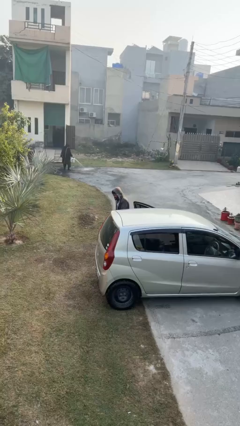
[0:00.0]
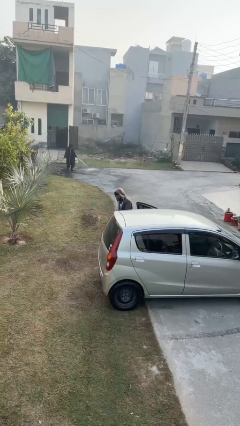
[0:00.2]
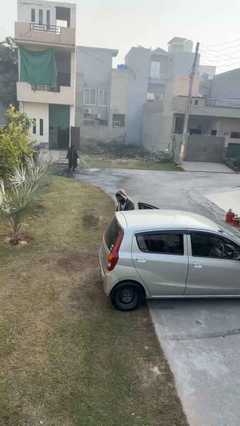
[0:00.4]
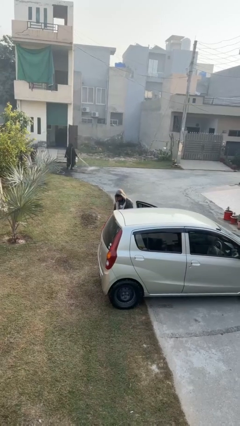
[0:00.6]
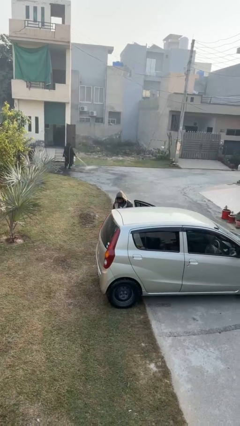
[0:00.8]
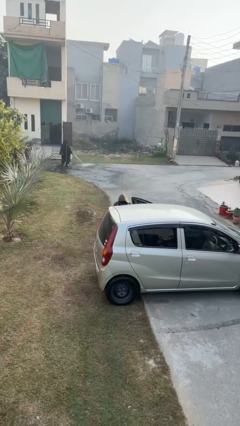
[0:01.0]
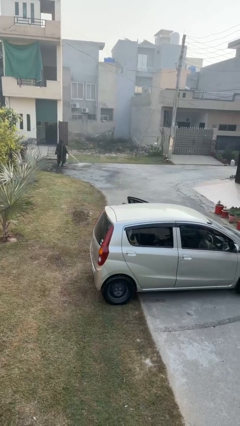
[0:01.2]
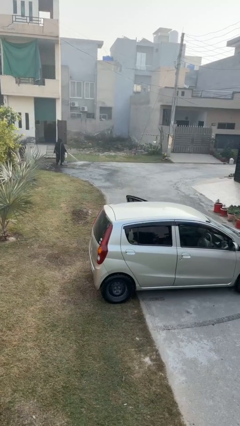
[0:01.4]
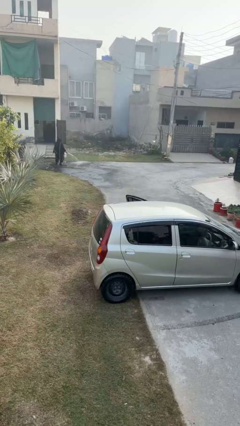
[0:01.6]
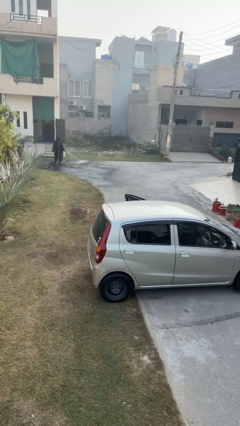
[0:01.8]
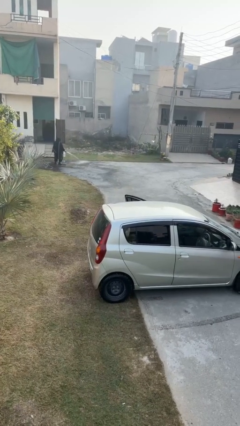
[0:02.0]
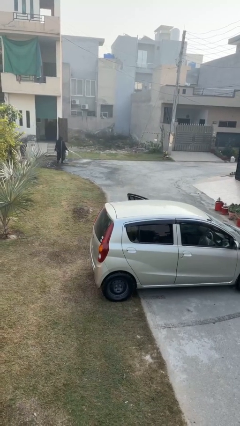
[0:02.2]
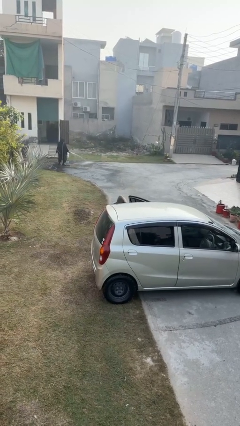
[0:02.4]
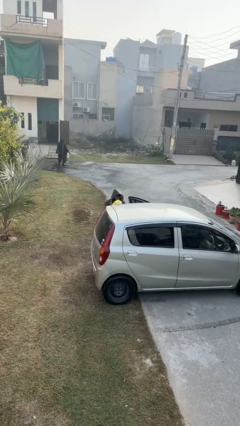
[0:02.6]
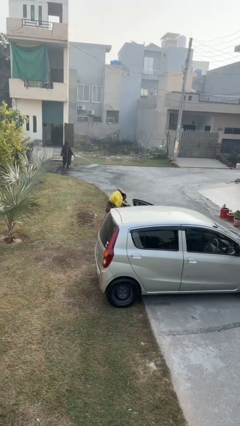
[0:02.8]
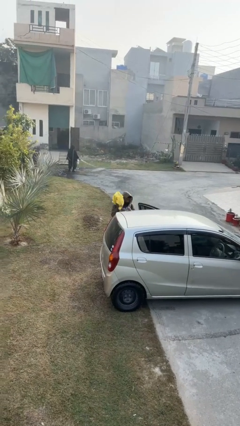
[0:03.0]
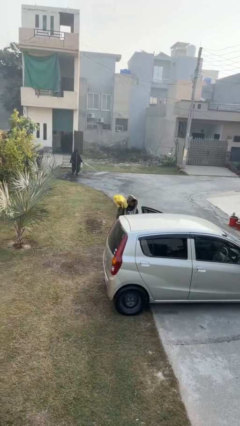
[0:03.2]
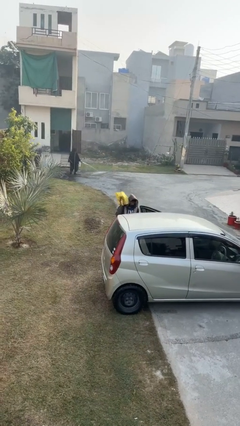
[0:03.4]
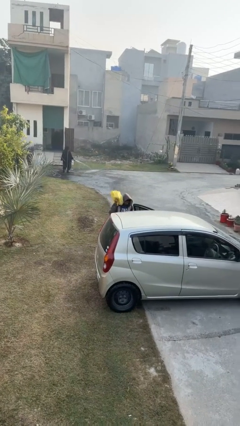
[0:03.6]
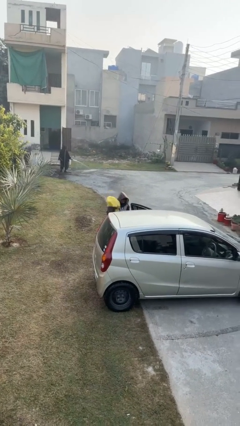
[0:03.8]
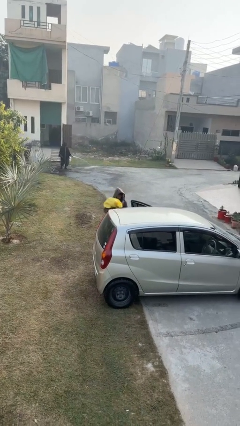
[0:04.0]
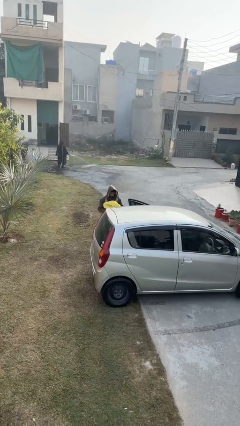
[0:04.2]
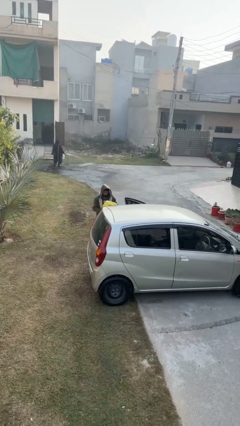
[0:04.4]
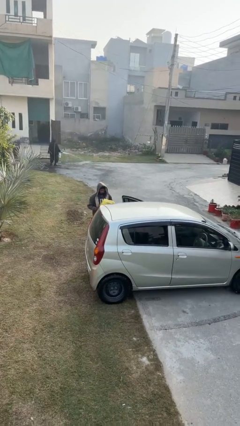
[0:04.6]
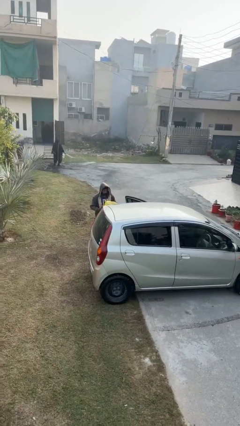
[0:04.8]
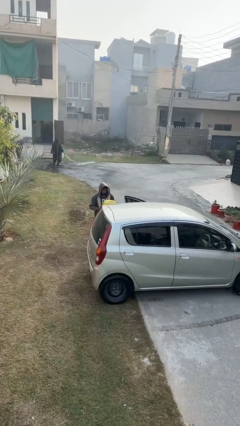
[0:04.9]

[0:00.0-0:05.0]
person unloads car

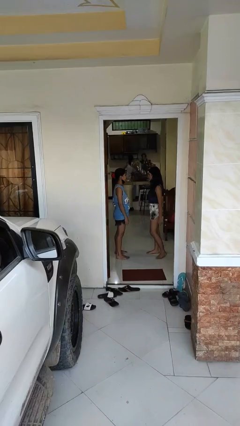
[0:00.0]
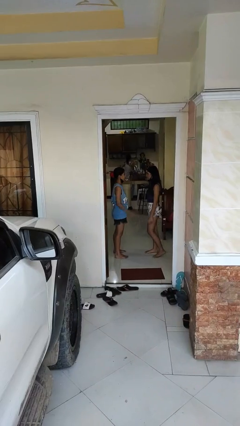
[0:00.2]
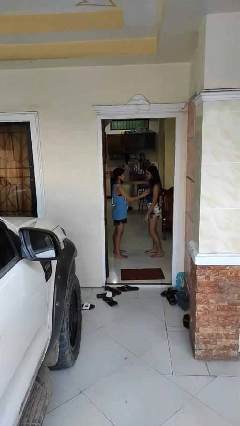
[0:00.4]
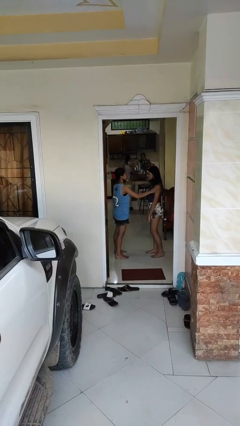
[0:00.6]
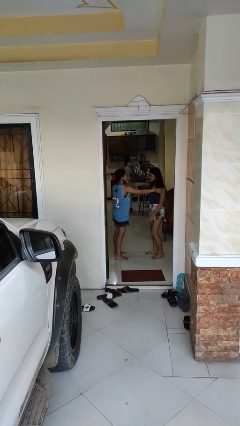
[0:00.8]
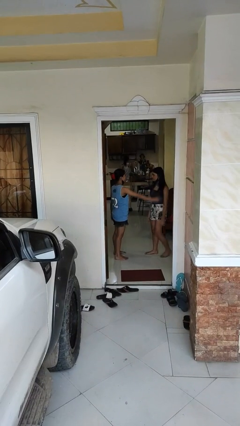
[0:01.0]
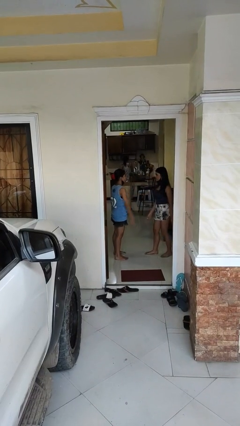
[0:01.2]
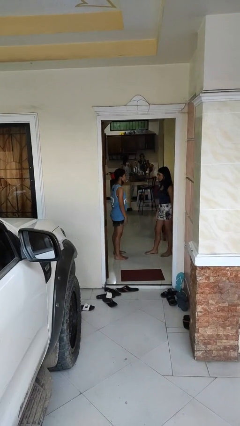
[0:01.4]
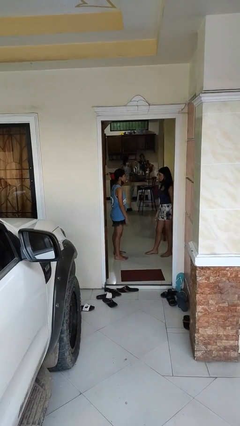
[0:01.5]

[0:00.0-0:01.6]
person shoves person

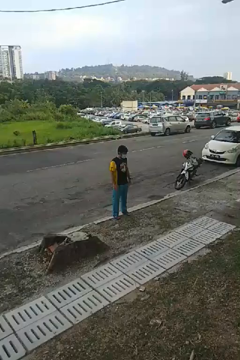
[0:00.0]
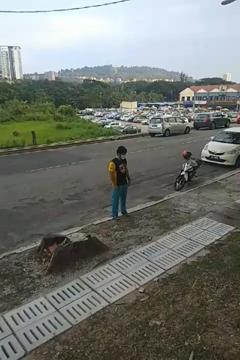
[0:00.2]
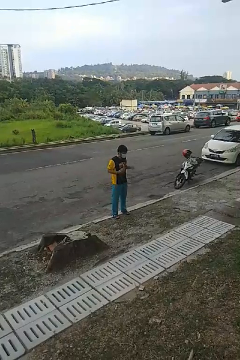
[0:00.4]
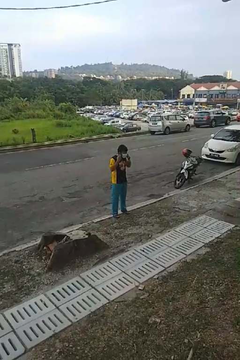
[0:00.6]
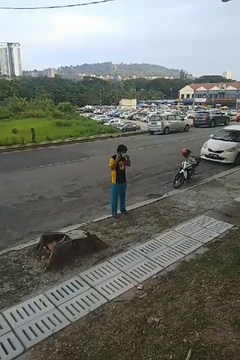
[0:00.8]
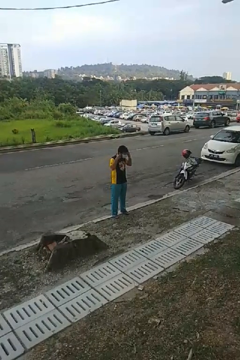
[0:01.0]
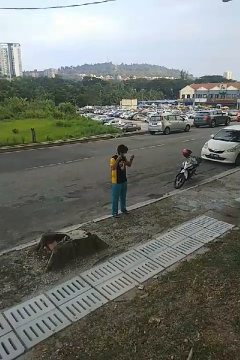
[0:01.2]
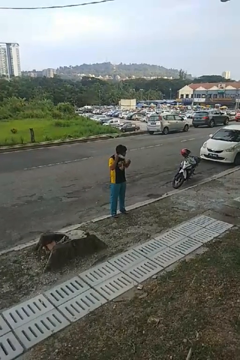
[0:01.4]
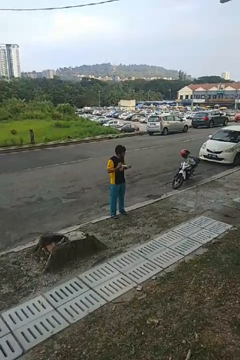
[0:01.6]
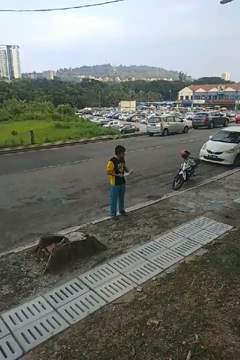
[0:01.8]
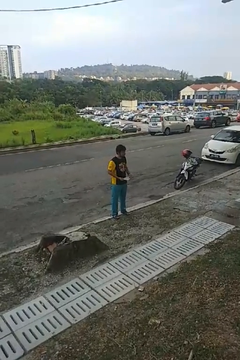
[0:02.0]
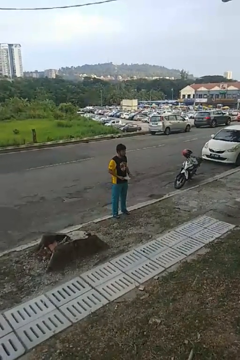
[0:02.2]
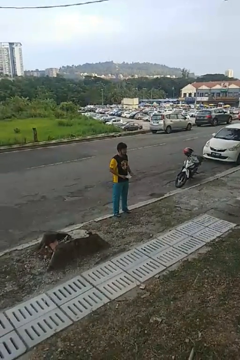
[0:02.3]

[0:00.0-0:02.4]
person takes off facemask

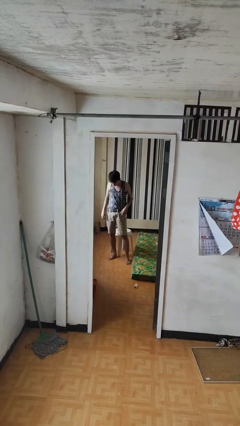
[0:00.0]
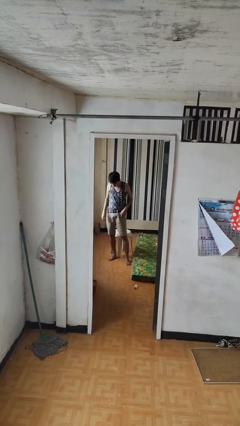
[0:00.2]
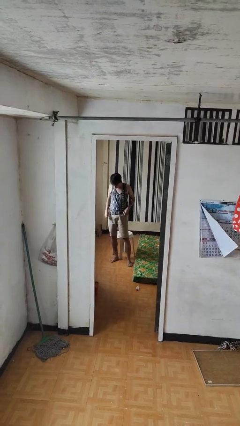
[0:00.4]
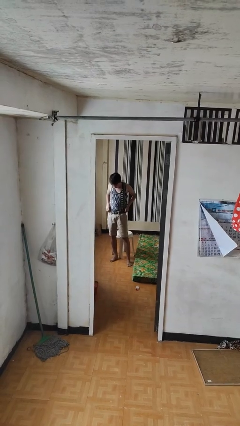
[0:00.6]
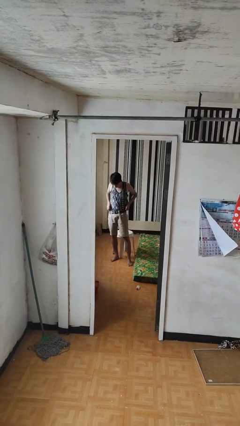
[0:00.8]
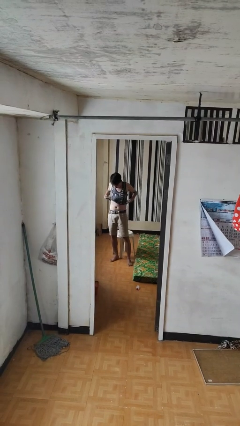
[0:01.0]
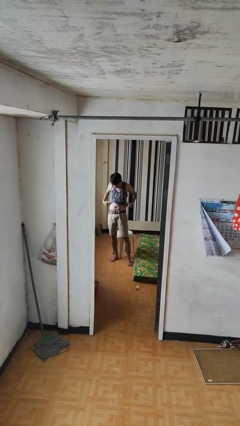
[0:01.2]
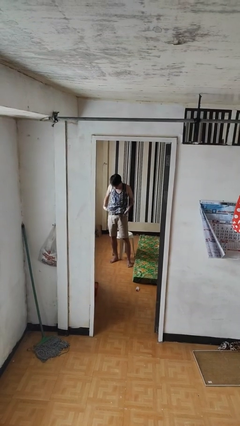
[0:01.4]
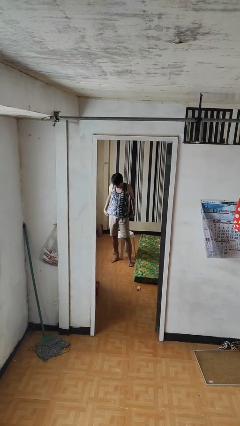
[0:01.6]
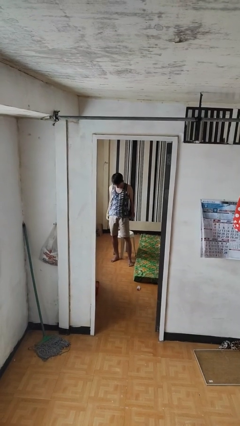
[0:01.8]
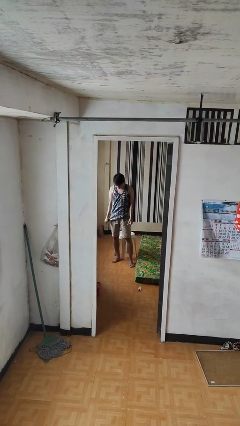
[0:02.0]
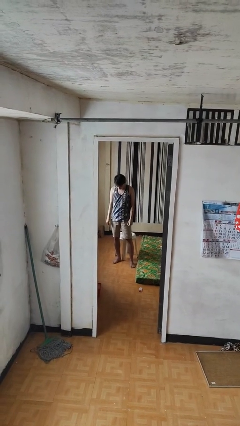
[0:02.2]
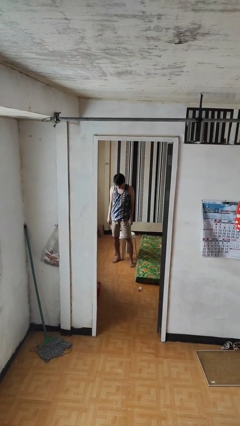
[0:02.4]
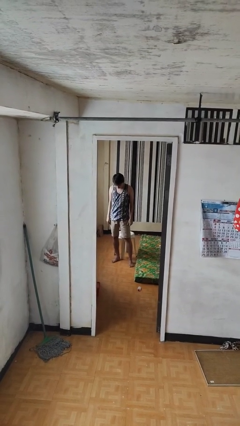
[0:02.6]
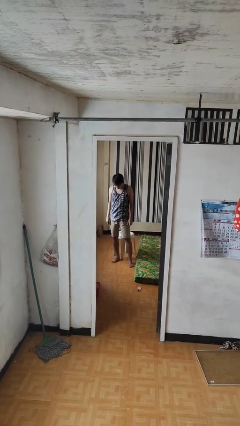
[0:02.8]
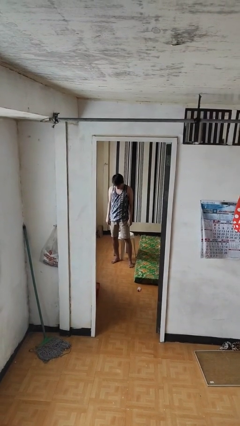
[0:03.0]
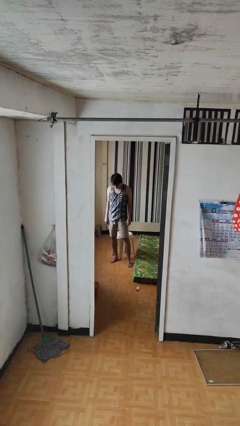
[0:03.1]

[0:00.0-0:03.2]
person untucks shirt

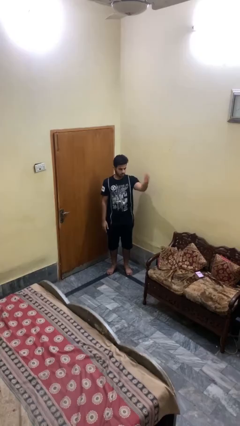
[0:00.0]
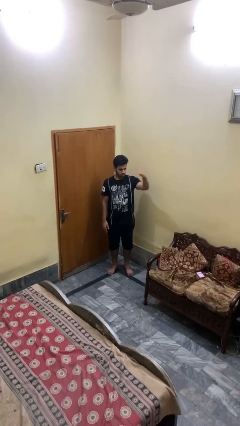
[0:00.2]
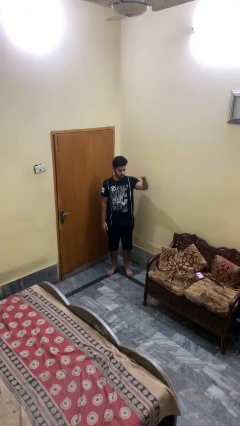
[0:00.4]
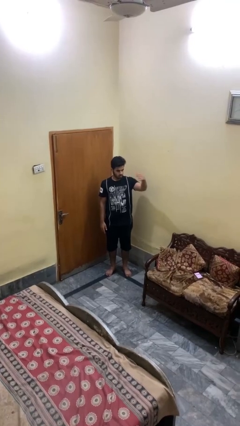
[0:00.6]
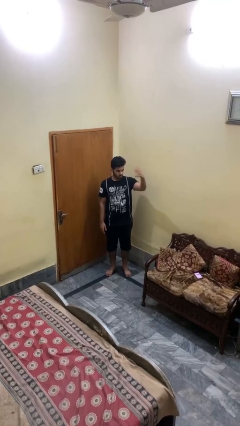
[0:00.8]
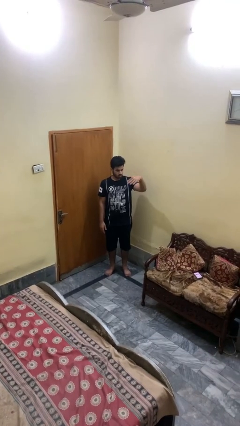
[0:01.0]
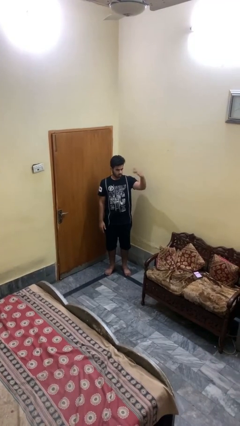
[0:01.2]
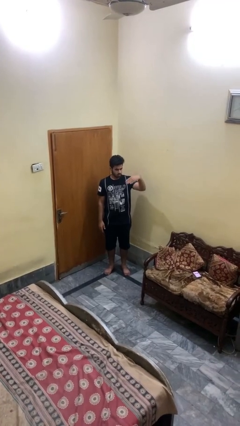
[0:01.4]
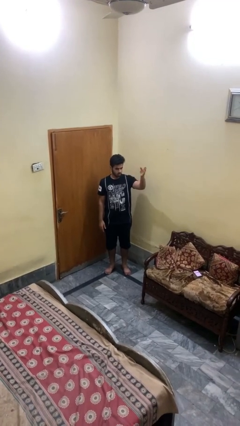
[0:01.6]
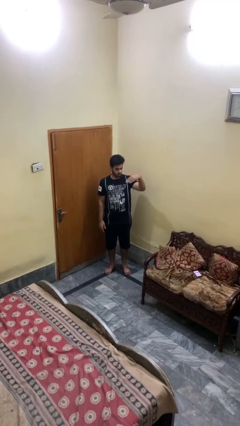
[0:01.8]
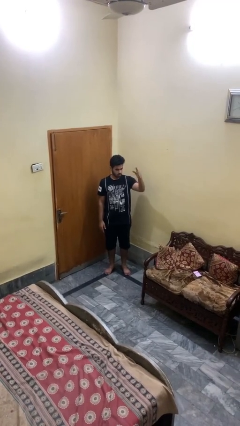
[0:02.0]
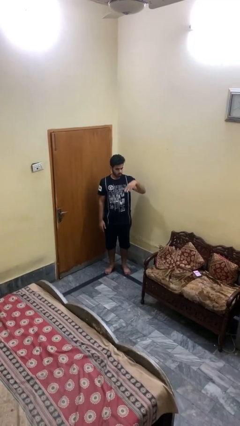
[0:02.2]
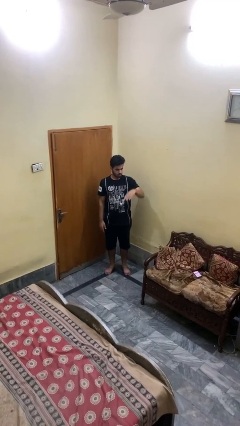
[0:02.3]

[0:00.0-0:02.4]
person gestures come here

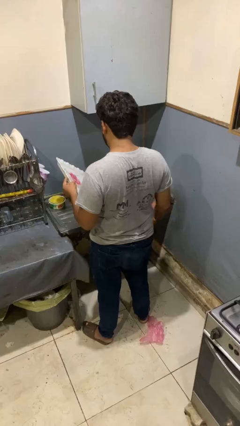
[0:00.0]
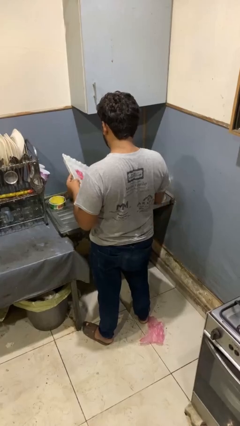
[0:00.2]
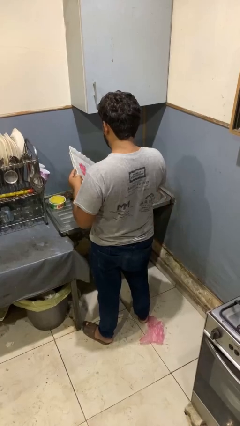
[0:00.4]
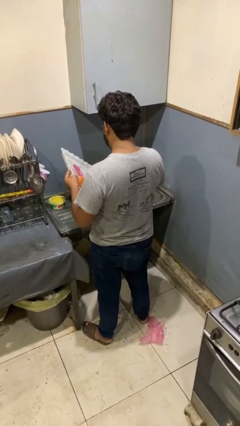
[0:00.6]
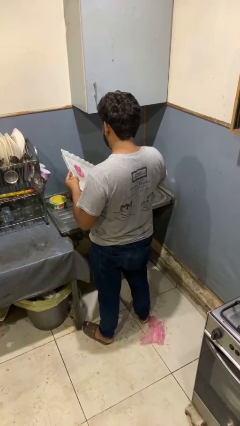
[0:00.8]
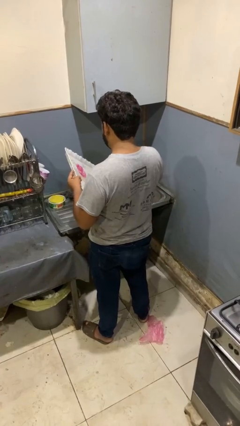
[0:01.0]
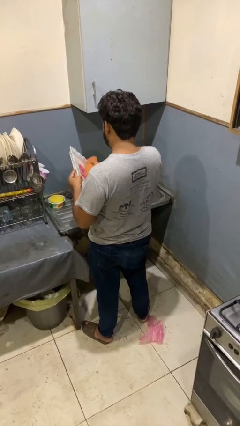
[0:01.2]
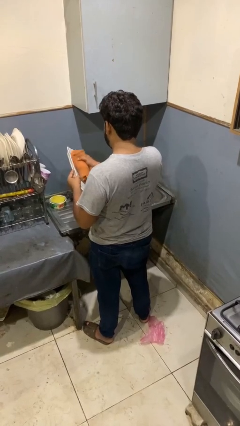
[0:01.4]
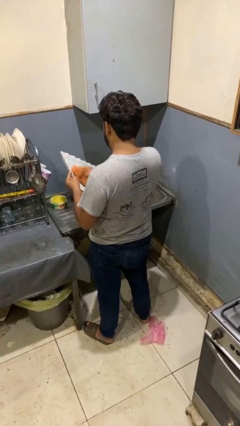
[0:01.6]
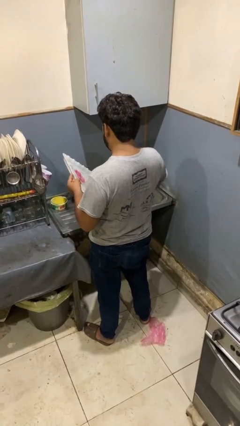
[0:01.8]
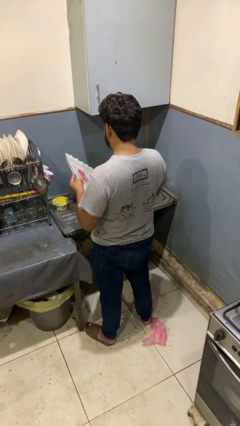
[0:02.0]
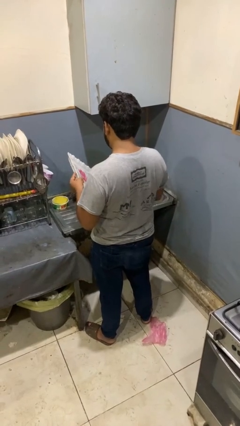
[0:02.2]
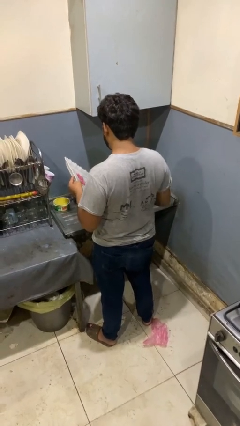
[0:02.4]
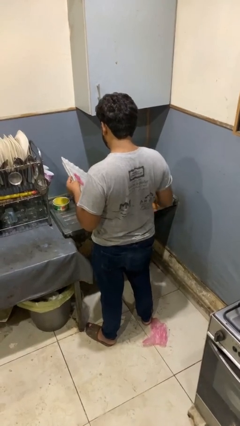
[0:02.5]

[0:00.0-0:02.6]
person dries dish

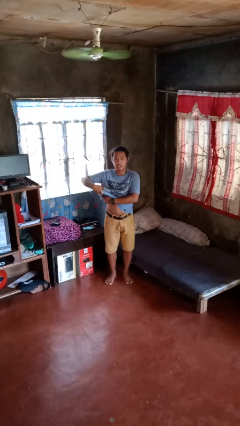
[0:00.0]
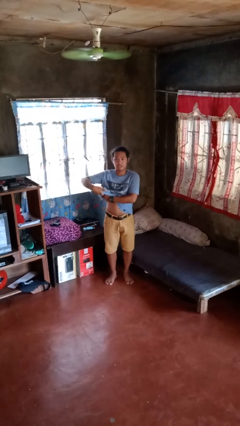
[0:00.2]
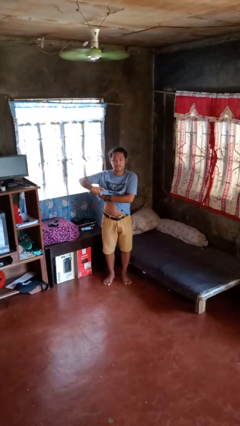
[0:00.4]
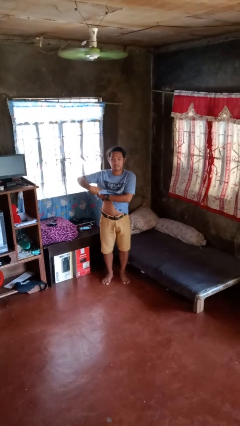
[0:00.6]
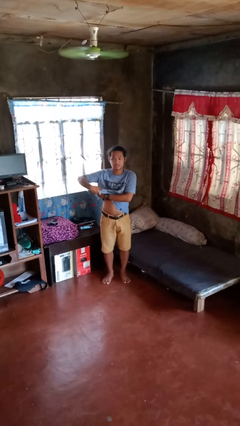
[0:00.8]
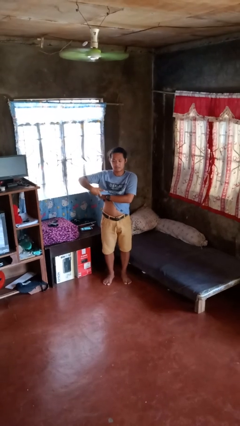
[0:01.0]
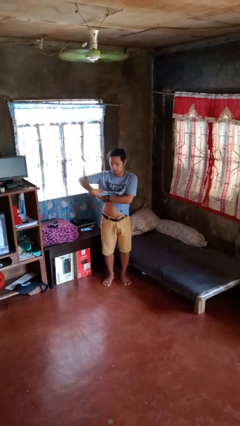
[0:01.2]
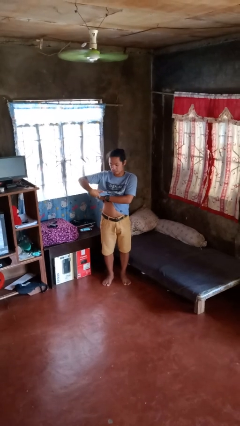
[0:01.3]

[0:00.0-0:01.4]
person applies deodorant
